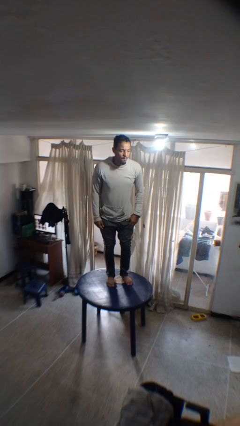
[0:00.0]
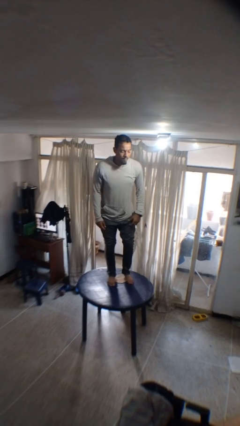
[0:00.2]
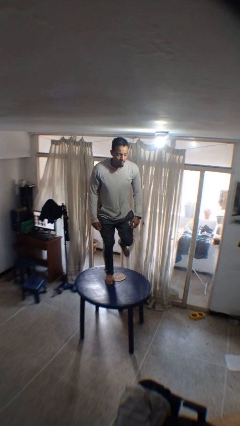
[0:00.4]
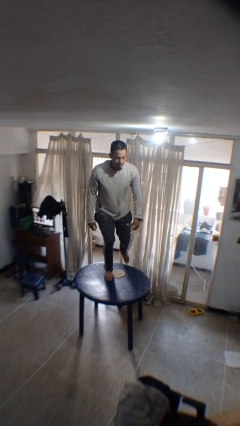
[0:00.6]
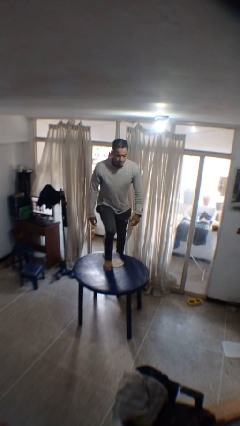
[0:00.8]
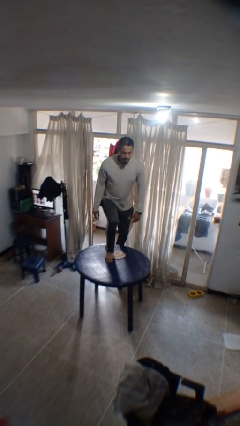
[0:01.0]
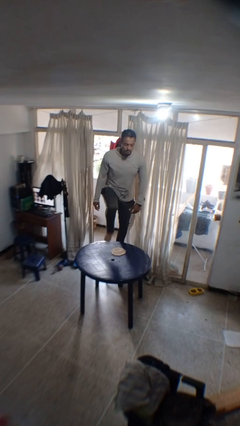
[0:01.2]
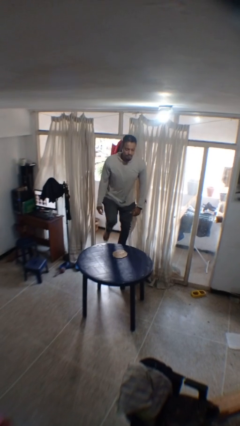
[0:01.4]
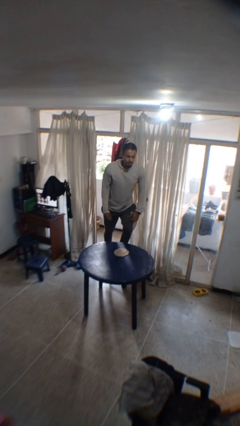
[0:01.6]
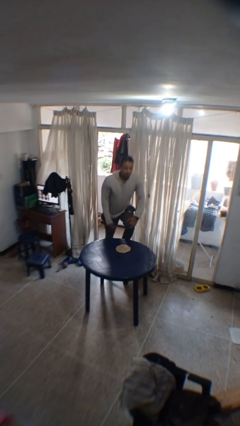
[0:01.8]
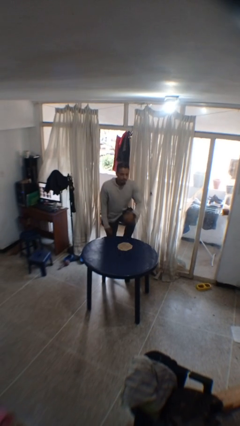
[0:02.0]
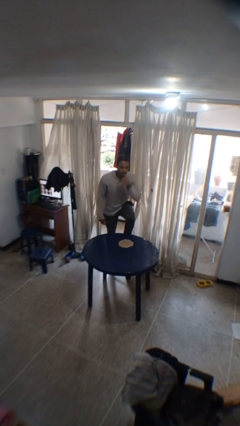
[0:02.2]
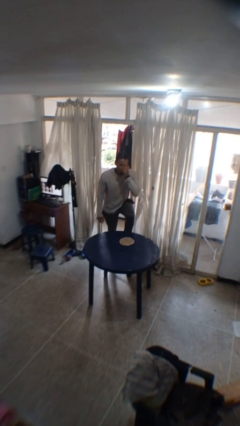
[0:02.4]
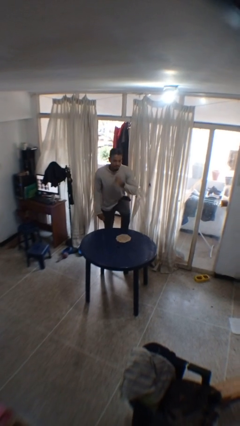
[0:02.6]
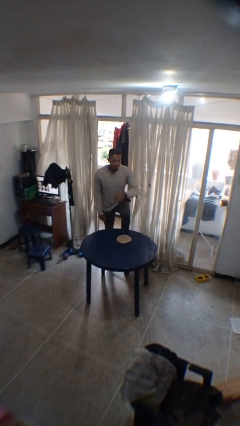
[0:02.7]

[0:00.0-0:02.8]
person climbs off table

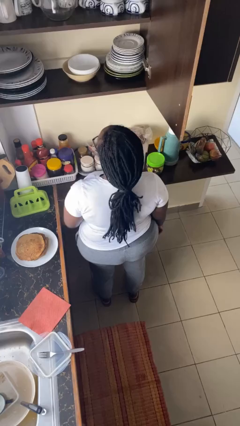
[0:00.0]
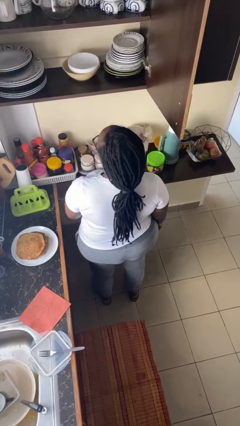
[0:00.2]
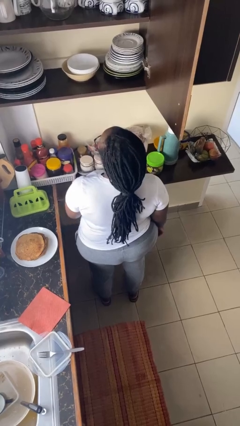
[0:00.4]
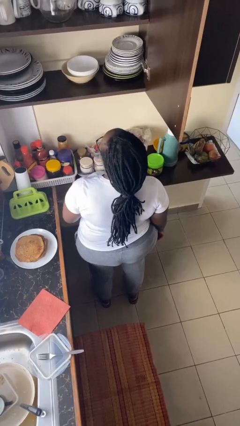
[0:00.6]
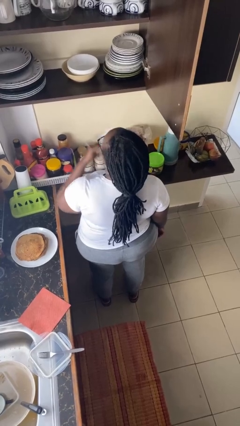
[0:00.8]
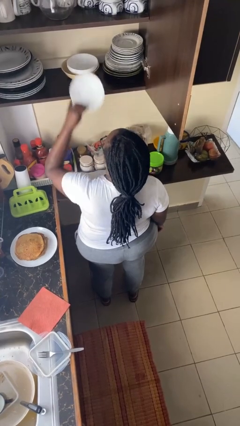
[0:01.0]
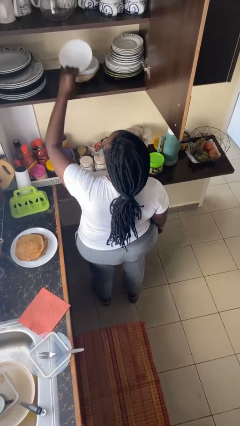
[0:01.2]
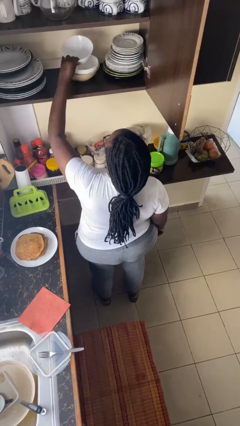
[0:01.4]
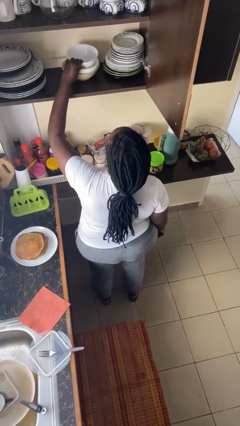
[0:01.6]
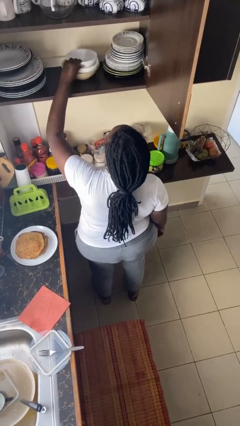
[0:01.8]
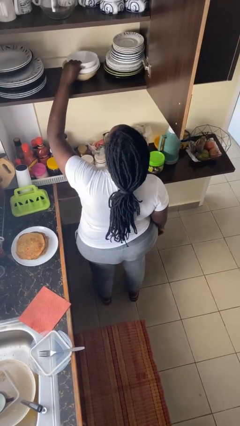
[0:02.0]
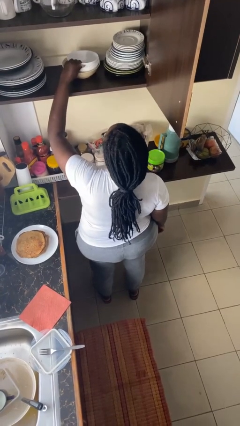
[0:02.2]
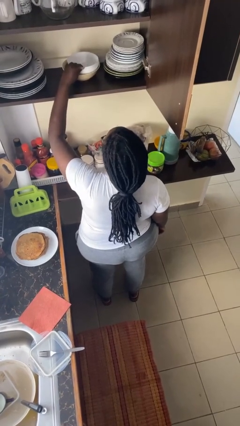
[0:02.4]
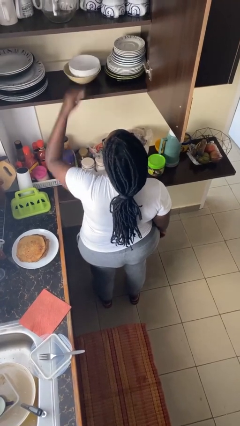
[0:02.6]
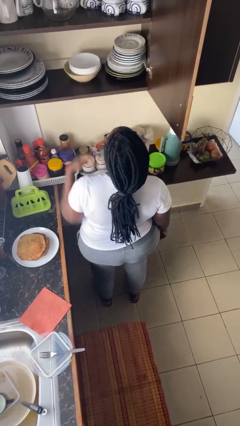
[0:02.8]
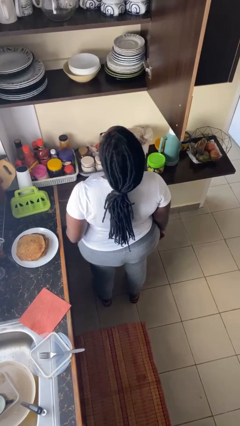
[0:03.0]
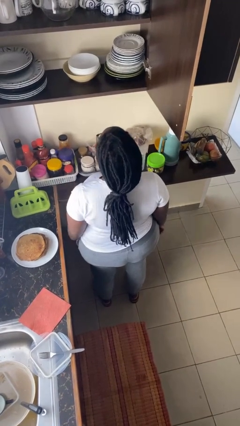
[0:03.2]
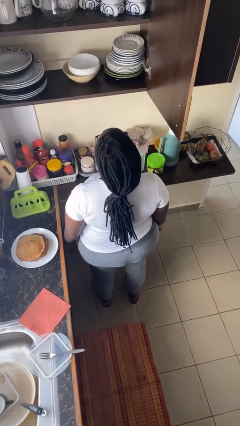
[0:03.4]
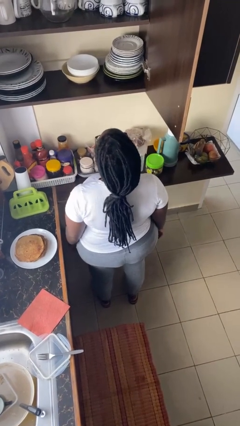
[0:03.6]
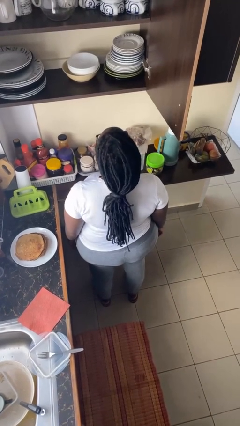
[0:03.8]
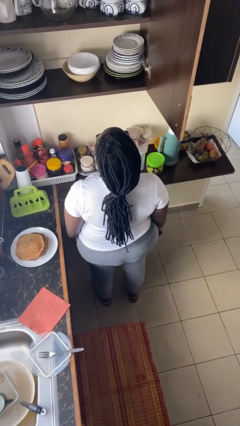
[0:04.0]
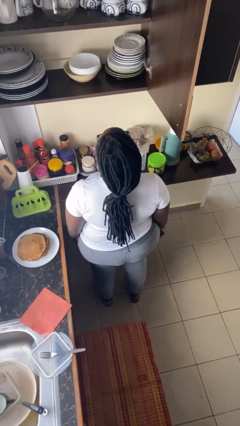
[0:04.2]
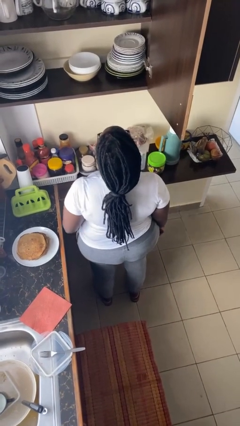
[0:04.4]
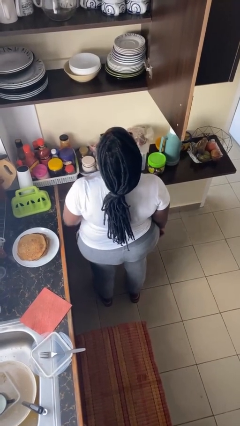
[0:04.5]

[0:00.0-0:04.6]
person puts object in cabinet

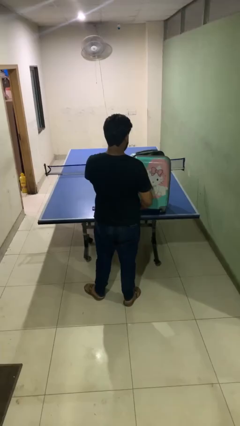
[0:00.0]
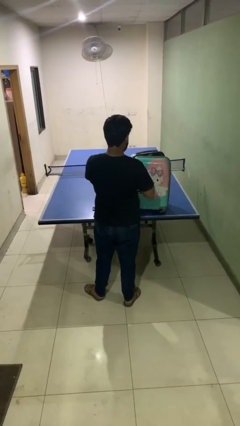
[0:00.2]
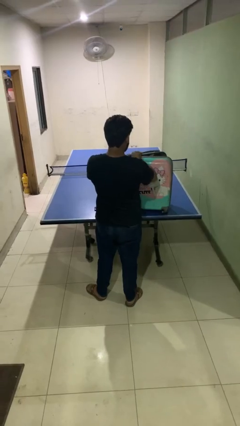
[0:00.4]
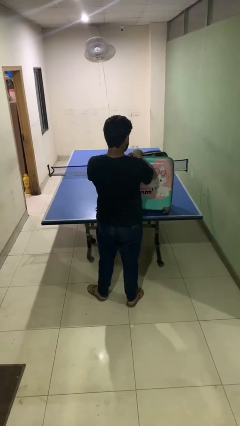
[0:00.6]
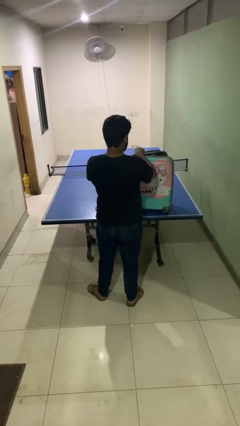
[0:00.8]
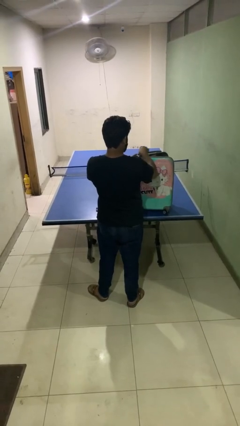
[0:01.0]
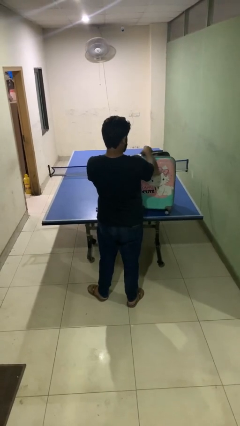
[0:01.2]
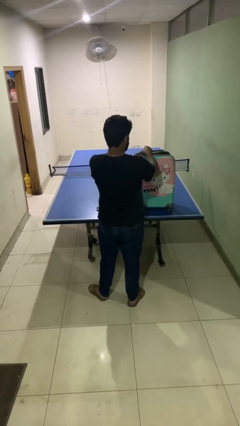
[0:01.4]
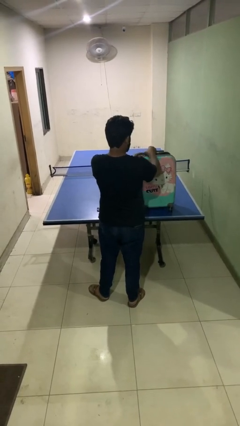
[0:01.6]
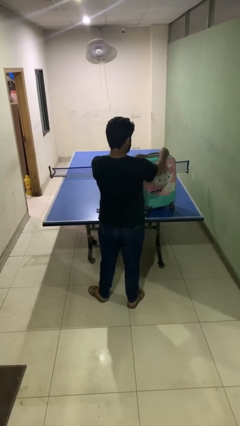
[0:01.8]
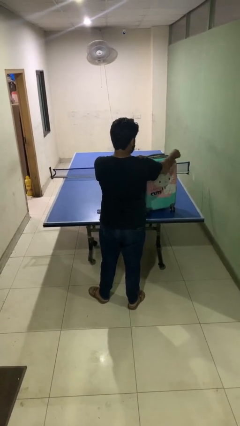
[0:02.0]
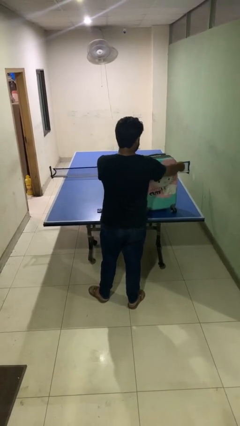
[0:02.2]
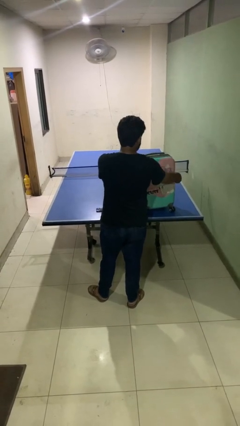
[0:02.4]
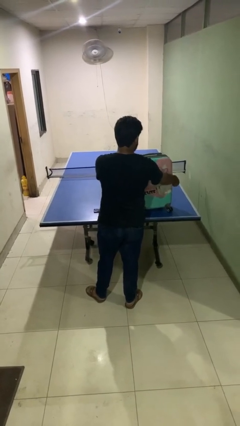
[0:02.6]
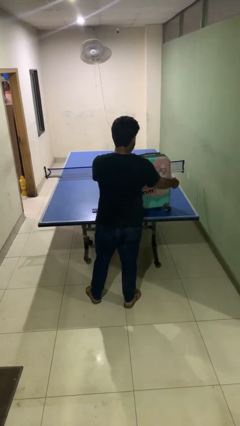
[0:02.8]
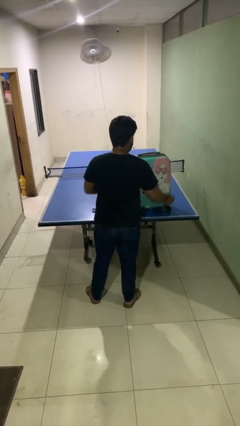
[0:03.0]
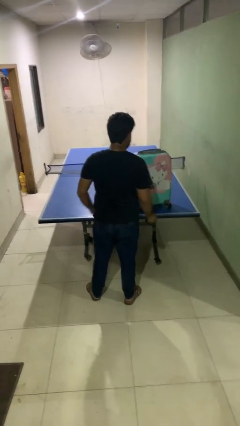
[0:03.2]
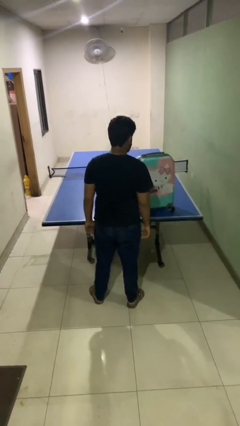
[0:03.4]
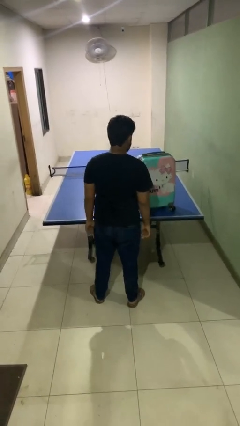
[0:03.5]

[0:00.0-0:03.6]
person closes suitcase

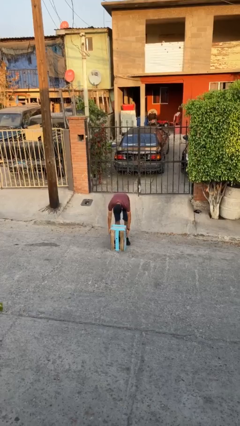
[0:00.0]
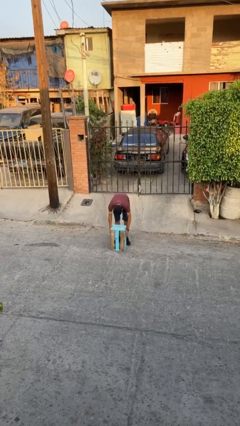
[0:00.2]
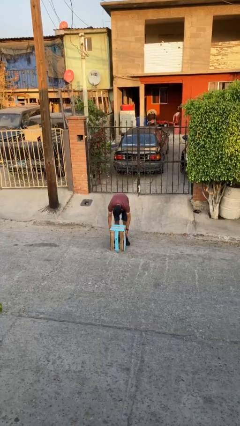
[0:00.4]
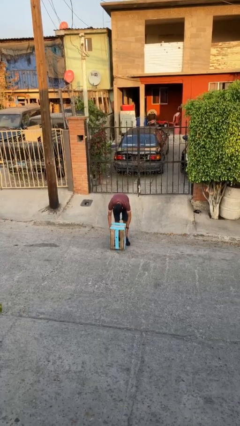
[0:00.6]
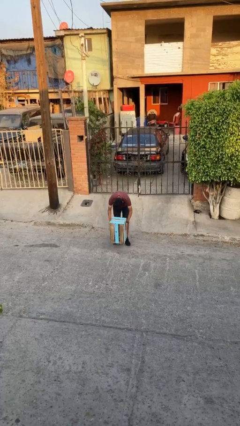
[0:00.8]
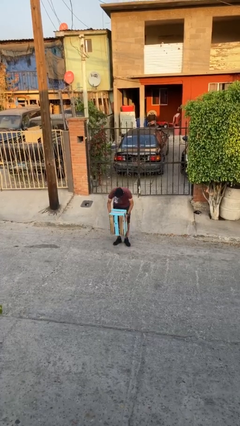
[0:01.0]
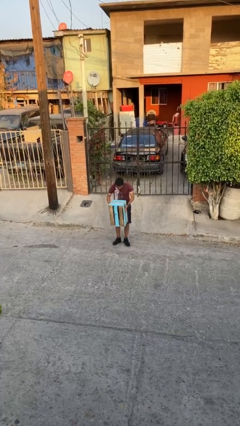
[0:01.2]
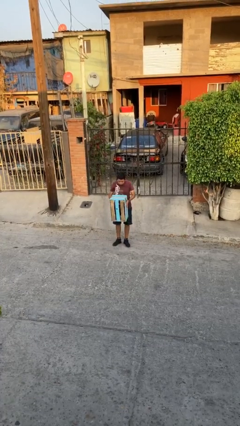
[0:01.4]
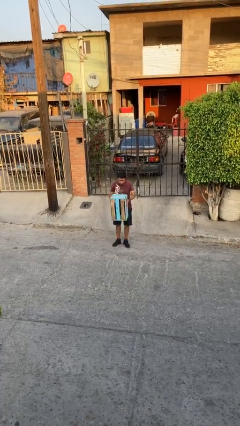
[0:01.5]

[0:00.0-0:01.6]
person picks up object from floor

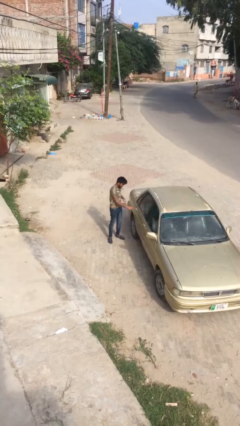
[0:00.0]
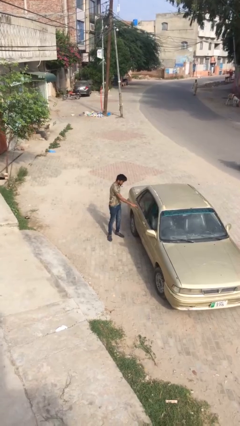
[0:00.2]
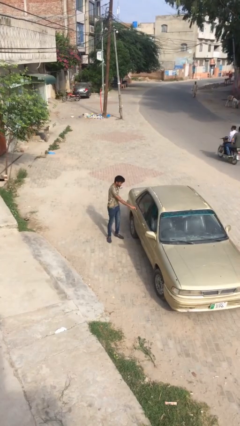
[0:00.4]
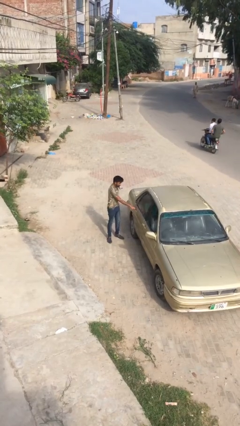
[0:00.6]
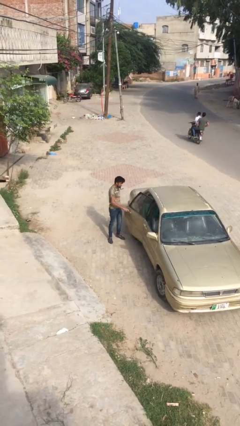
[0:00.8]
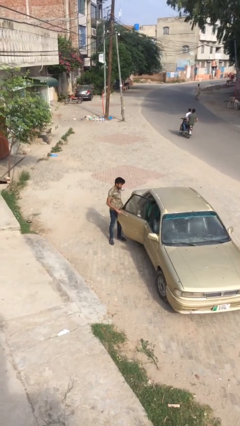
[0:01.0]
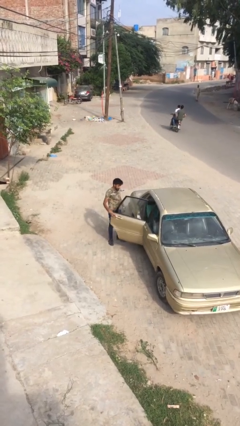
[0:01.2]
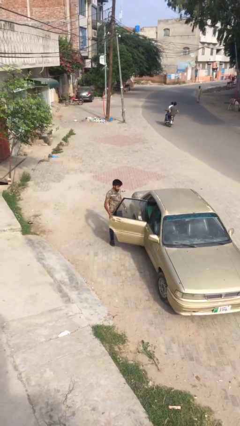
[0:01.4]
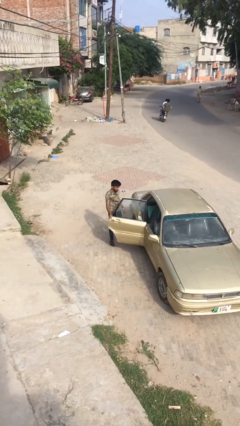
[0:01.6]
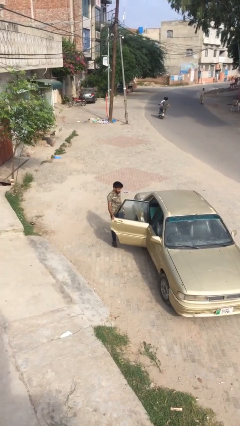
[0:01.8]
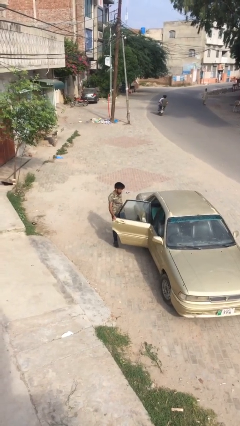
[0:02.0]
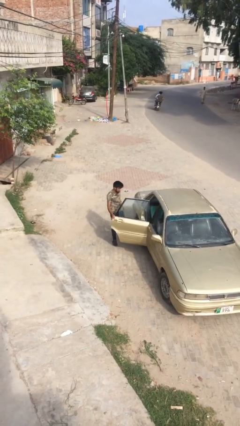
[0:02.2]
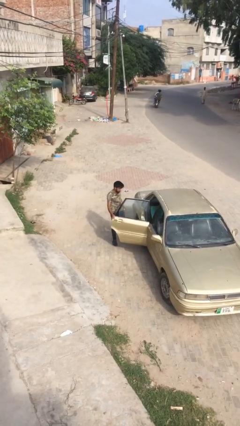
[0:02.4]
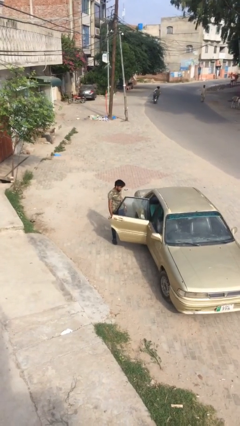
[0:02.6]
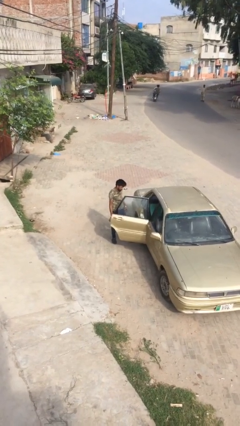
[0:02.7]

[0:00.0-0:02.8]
person opens car door

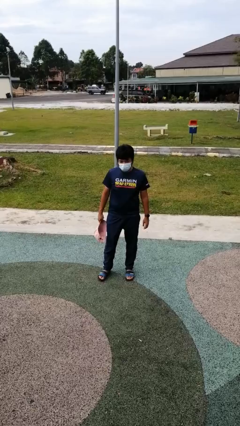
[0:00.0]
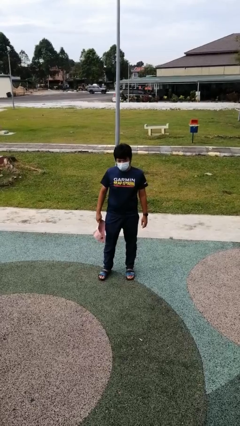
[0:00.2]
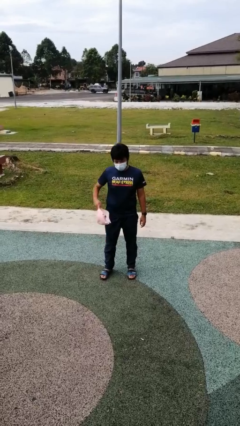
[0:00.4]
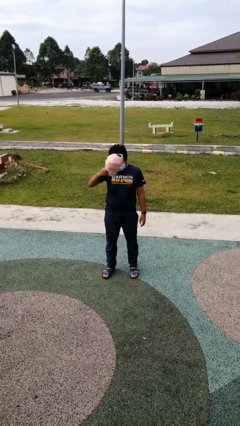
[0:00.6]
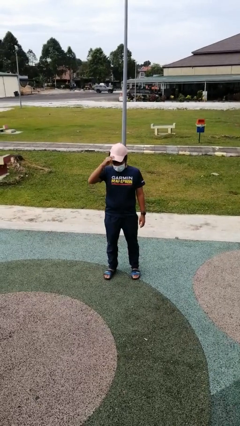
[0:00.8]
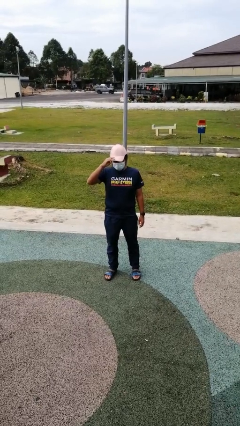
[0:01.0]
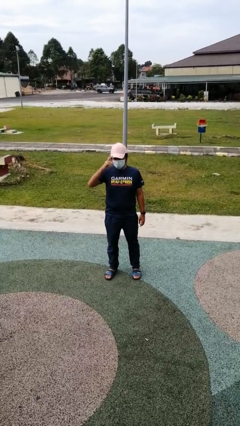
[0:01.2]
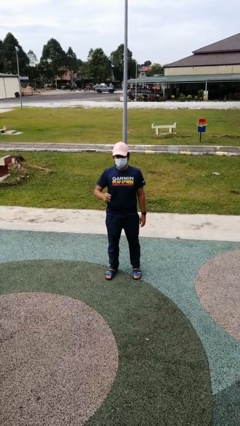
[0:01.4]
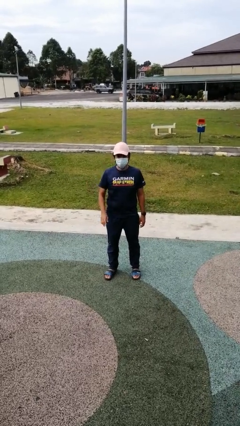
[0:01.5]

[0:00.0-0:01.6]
person puts on hat

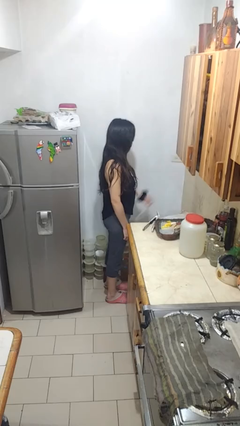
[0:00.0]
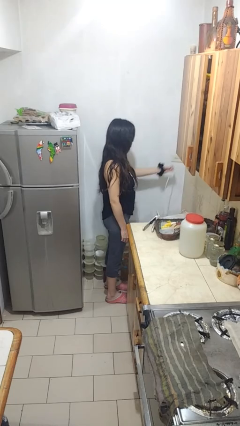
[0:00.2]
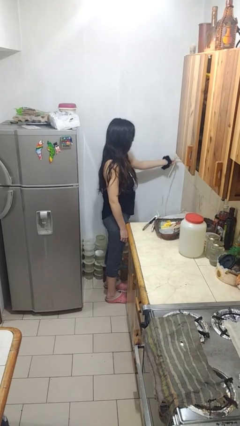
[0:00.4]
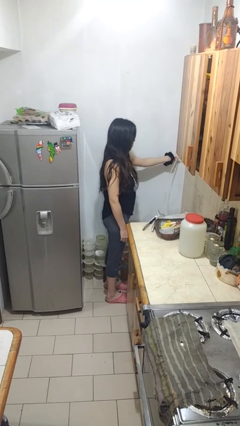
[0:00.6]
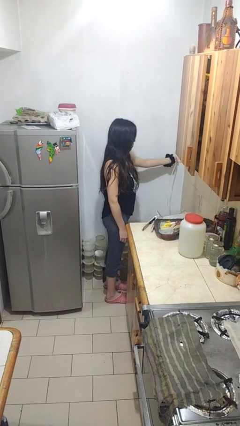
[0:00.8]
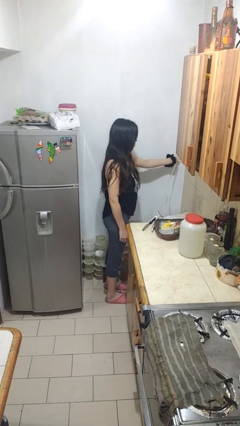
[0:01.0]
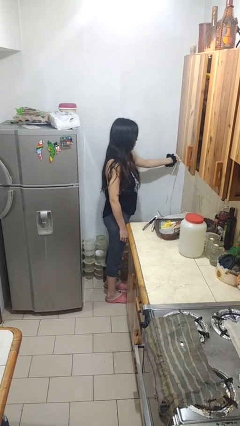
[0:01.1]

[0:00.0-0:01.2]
person plugs into electrical socket
